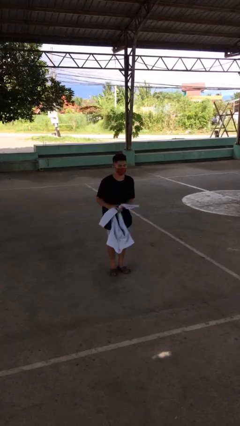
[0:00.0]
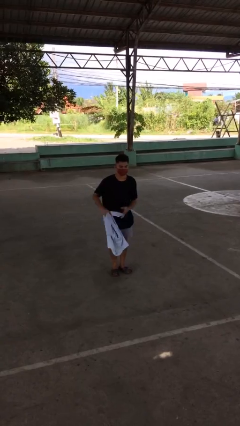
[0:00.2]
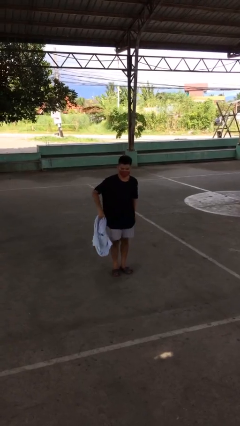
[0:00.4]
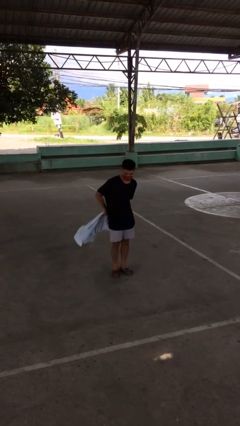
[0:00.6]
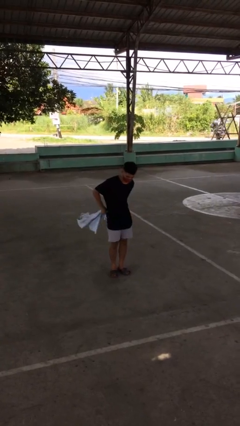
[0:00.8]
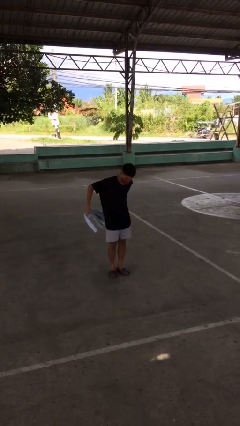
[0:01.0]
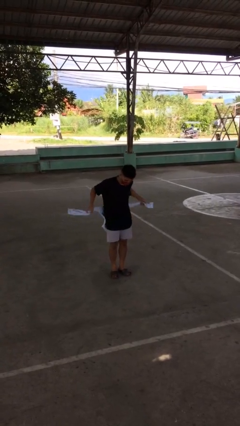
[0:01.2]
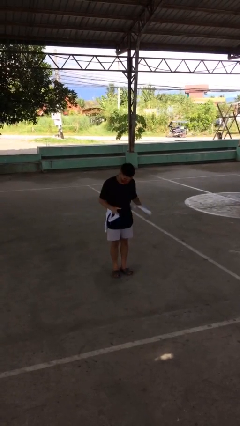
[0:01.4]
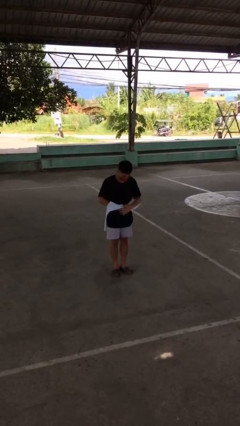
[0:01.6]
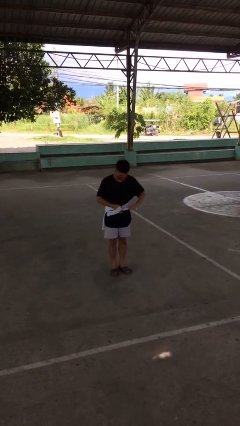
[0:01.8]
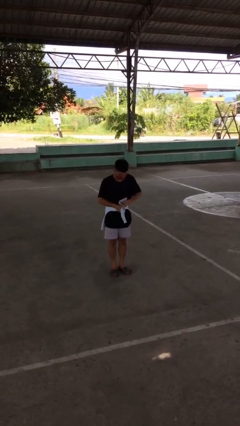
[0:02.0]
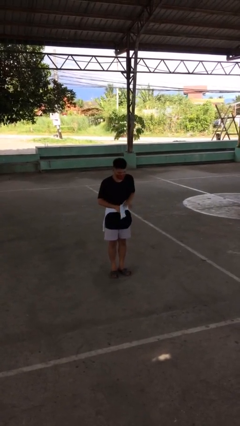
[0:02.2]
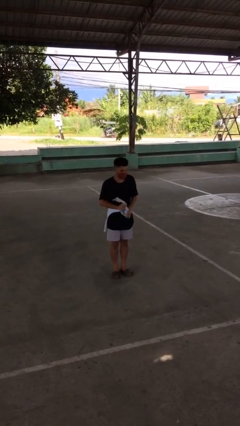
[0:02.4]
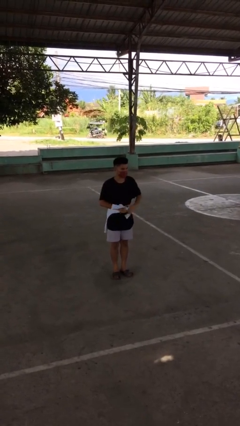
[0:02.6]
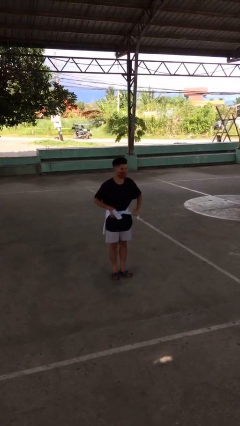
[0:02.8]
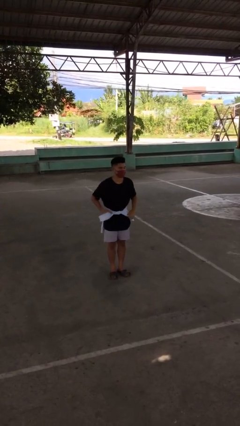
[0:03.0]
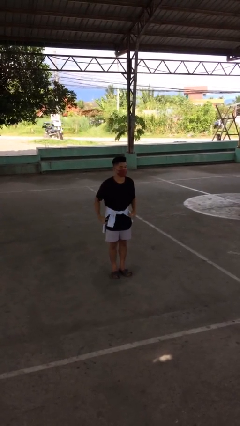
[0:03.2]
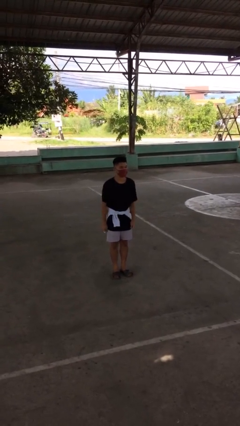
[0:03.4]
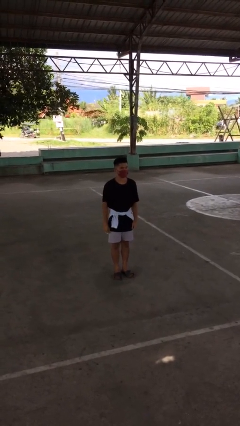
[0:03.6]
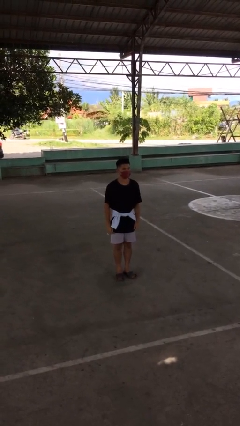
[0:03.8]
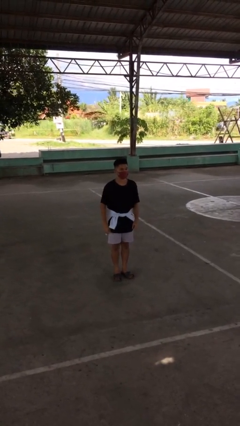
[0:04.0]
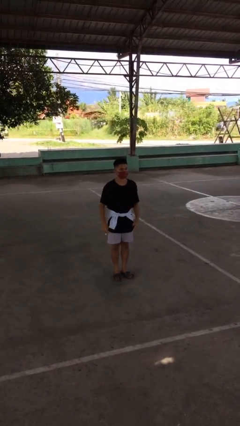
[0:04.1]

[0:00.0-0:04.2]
person ties jacket around waist

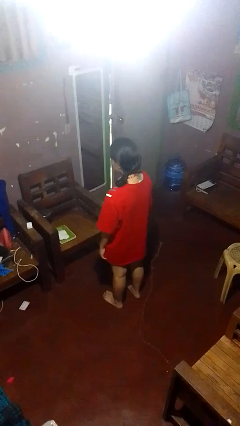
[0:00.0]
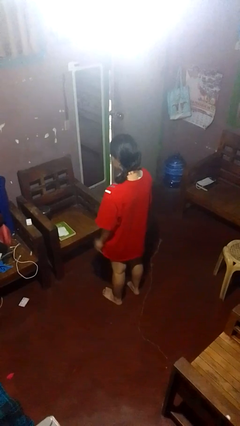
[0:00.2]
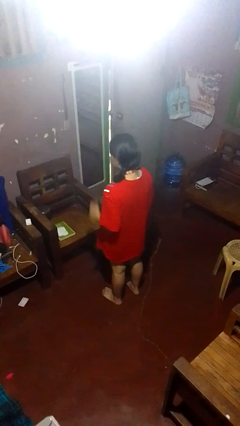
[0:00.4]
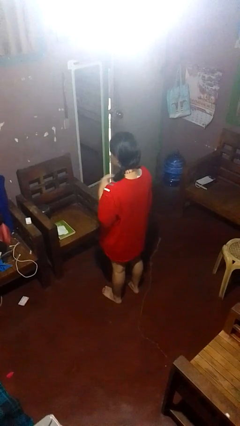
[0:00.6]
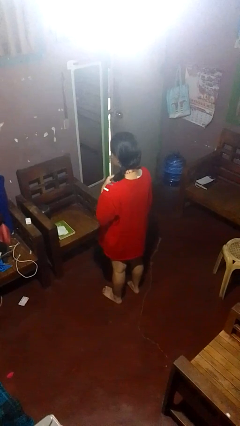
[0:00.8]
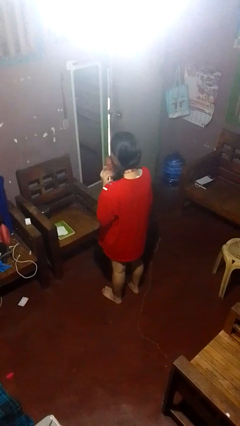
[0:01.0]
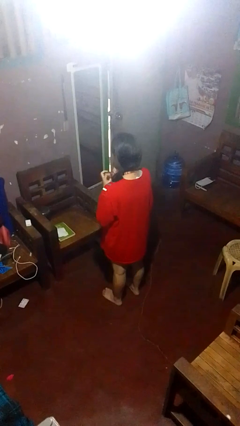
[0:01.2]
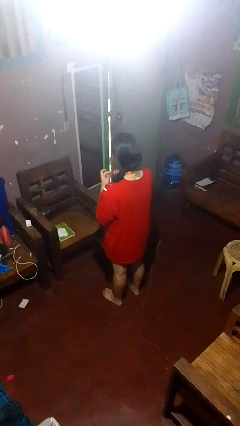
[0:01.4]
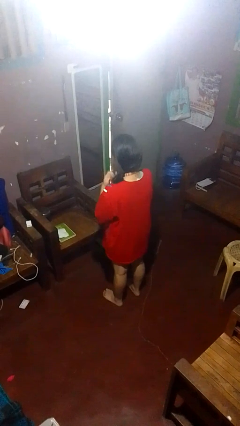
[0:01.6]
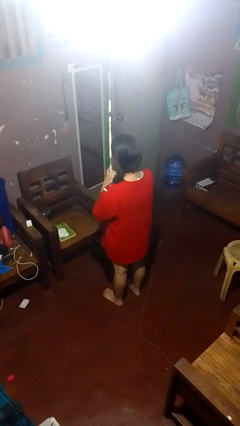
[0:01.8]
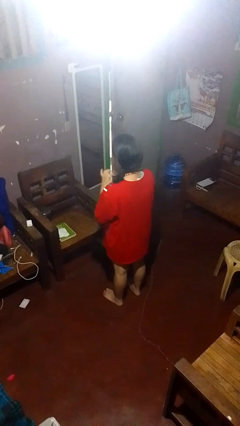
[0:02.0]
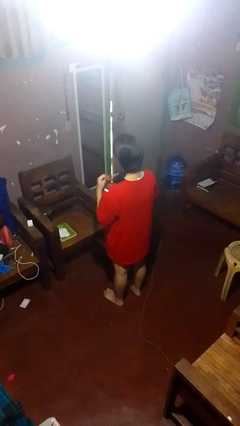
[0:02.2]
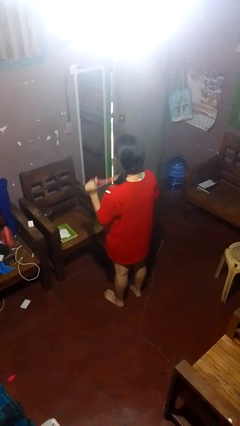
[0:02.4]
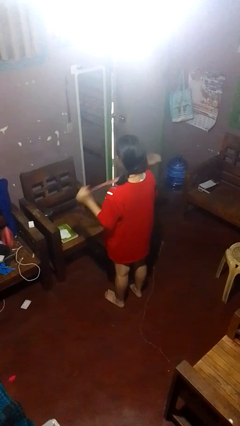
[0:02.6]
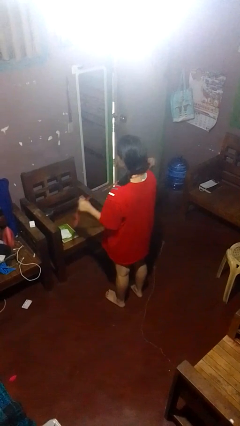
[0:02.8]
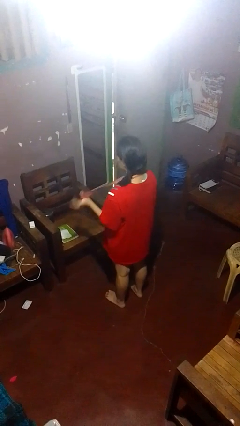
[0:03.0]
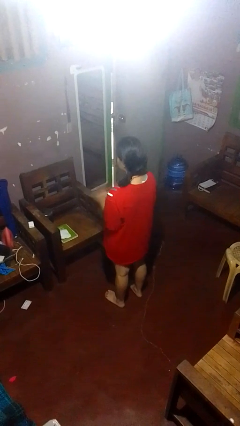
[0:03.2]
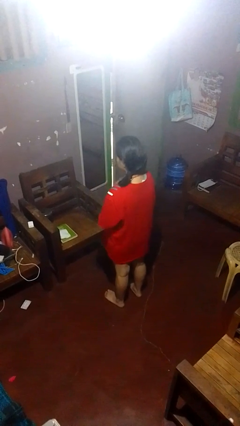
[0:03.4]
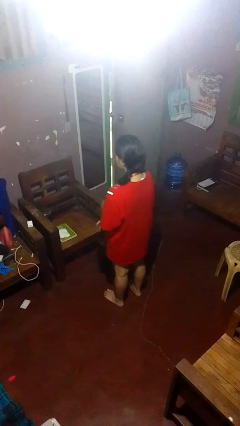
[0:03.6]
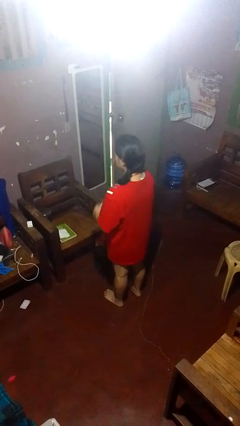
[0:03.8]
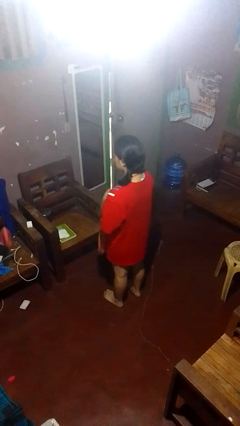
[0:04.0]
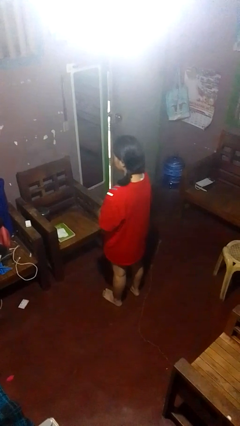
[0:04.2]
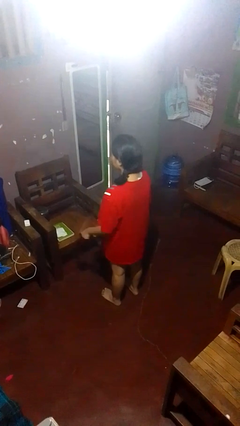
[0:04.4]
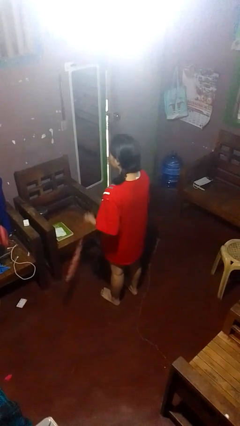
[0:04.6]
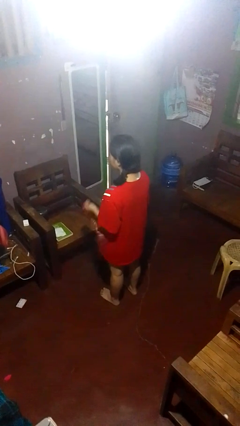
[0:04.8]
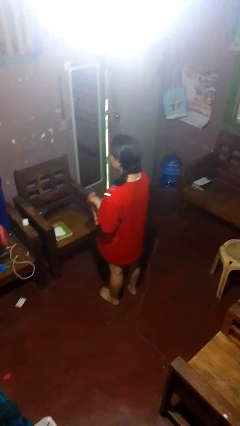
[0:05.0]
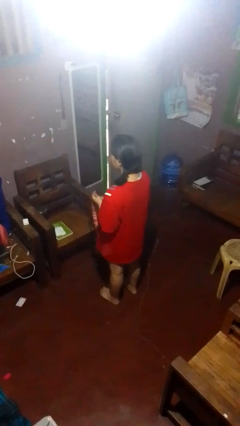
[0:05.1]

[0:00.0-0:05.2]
person takes off necktie

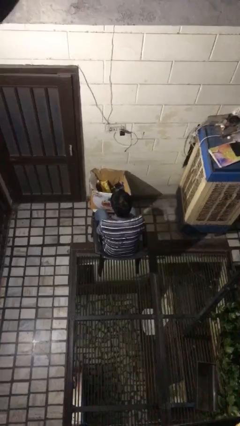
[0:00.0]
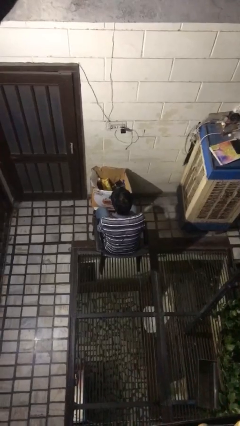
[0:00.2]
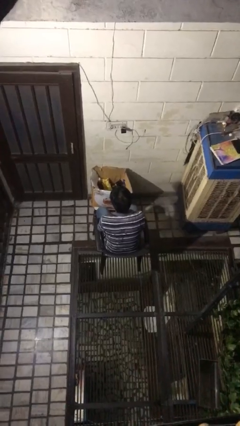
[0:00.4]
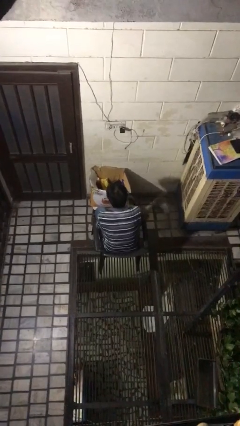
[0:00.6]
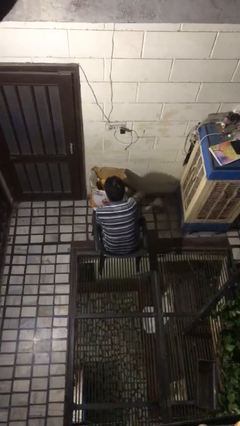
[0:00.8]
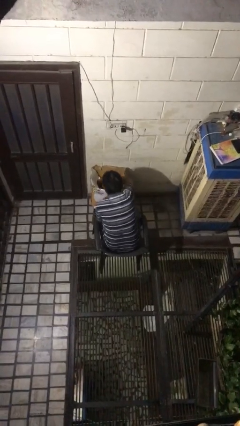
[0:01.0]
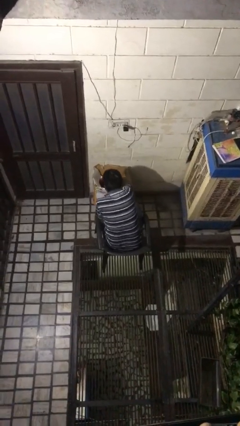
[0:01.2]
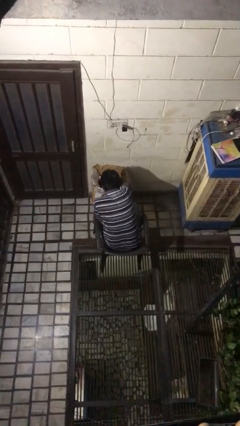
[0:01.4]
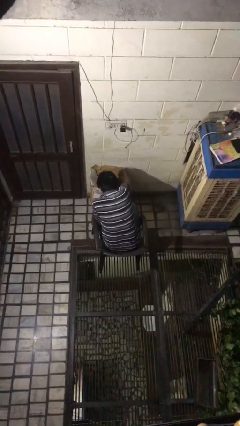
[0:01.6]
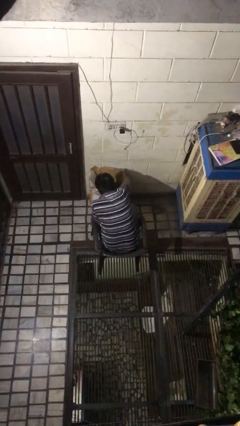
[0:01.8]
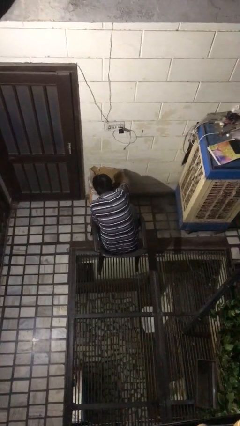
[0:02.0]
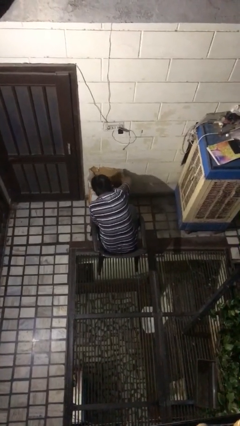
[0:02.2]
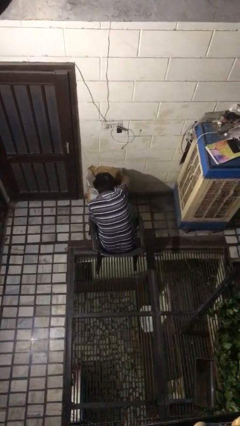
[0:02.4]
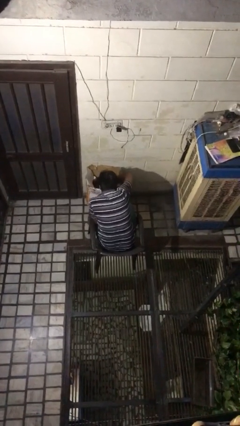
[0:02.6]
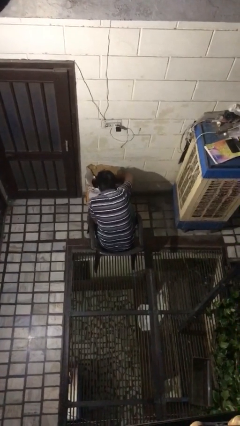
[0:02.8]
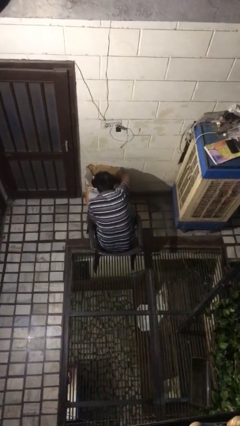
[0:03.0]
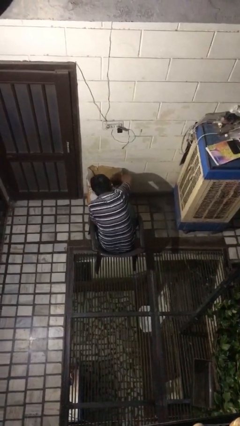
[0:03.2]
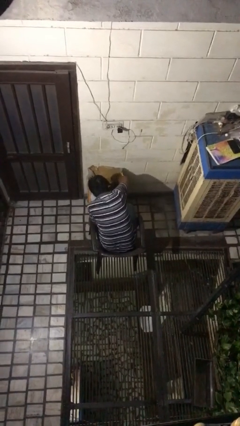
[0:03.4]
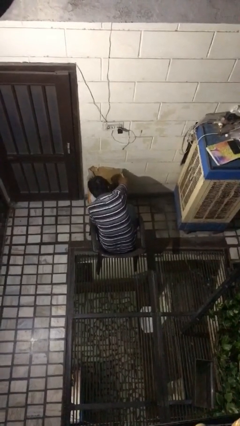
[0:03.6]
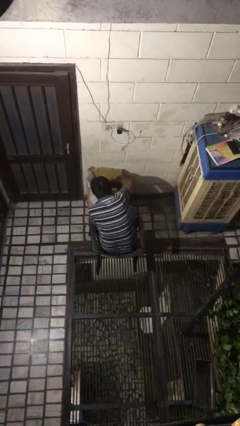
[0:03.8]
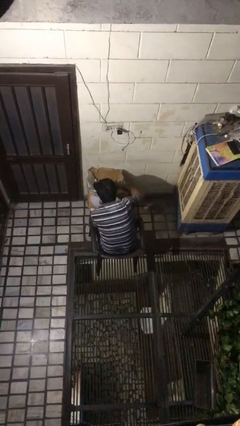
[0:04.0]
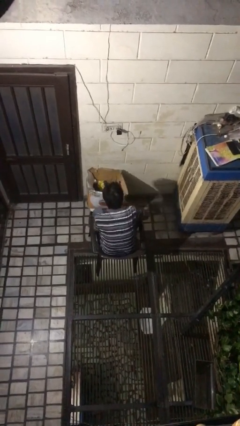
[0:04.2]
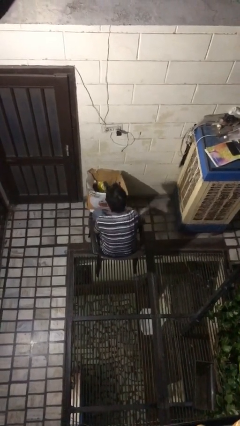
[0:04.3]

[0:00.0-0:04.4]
person searches in box

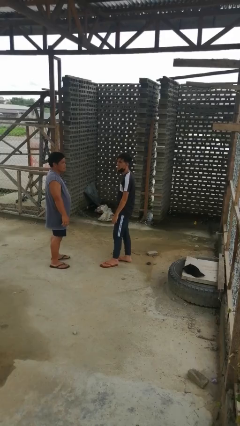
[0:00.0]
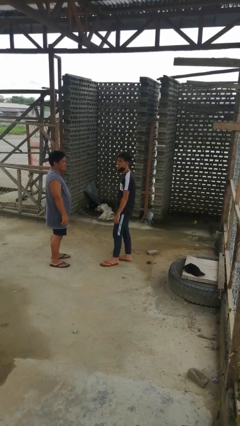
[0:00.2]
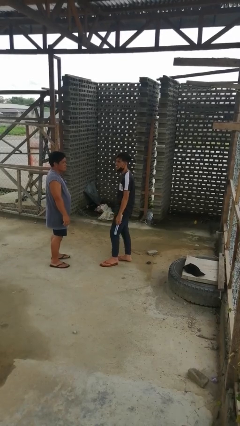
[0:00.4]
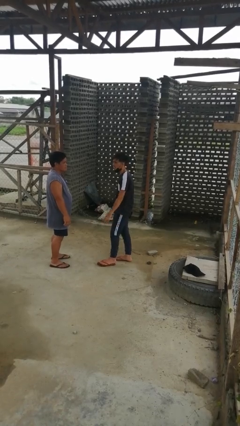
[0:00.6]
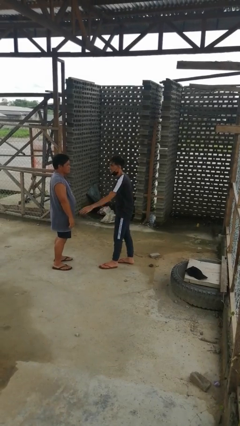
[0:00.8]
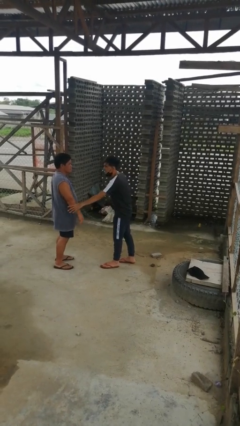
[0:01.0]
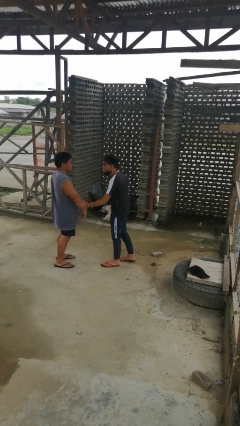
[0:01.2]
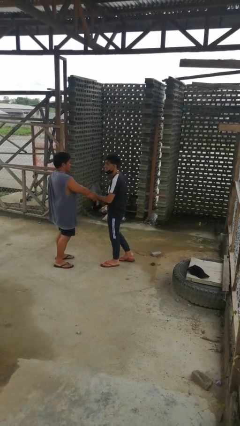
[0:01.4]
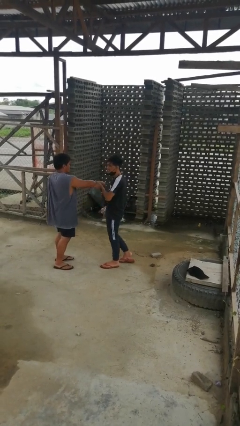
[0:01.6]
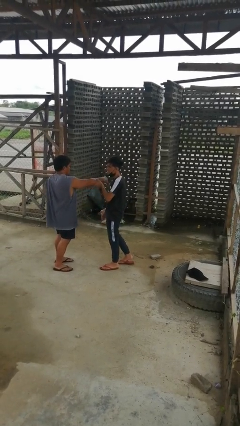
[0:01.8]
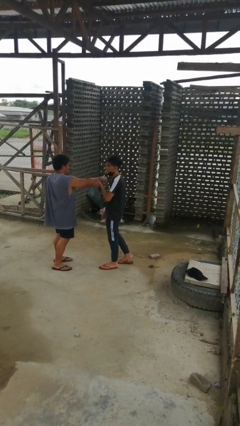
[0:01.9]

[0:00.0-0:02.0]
person grabs person by forearm

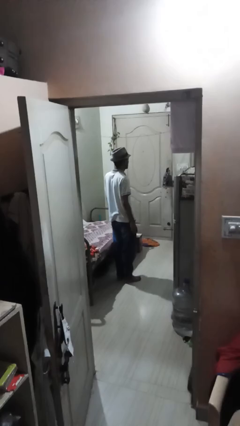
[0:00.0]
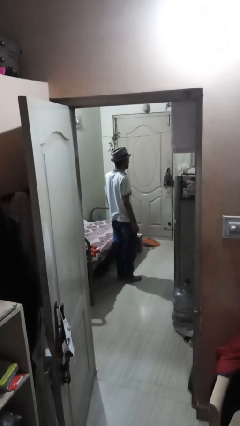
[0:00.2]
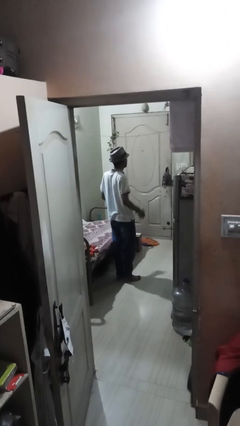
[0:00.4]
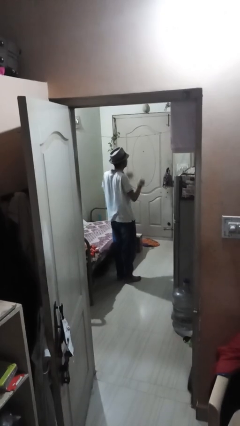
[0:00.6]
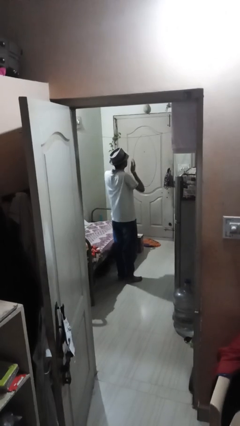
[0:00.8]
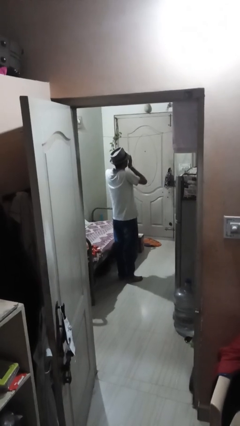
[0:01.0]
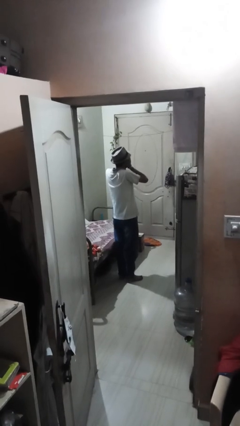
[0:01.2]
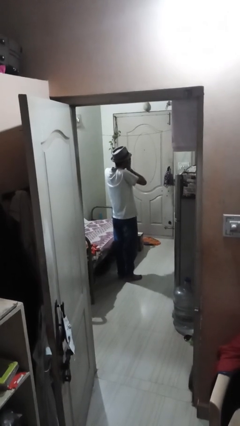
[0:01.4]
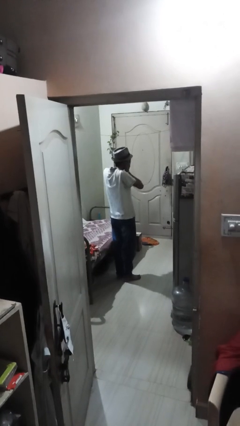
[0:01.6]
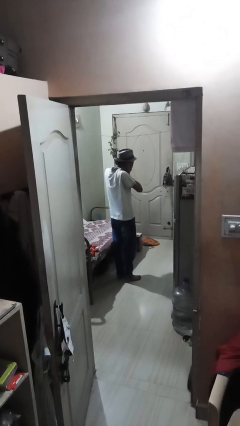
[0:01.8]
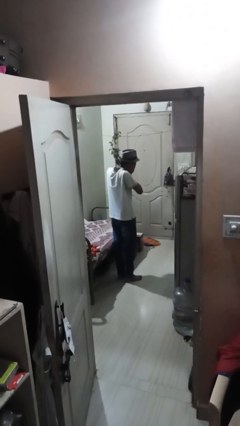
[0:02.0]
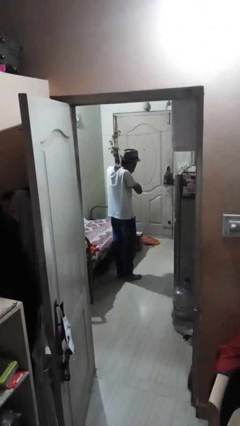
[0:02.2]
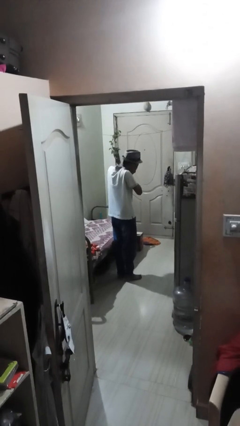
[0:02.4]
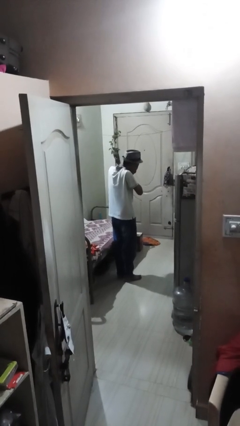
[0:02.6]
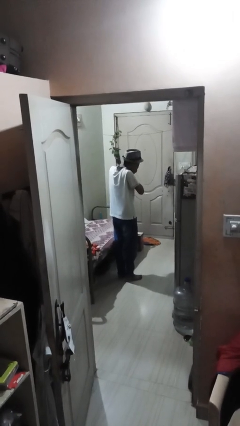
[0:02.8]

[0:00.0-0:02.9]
person covers face with hands
